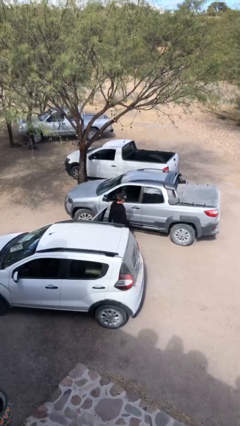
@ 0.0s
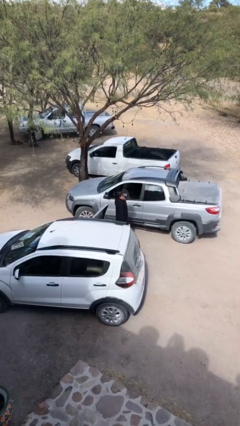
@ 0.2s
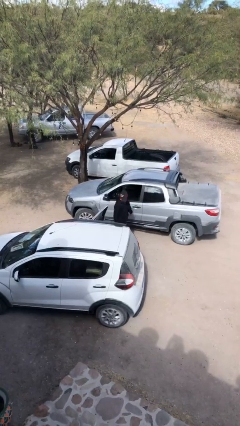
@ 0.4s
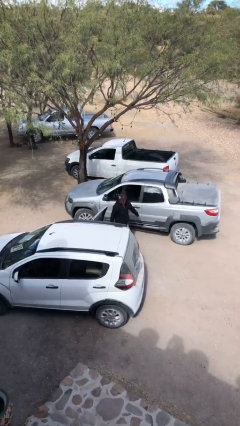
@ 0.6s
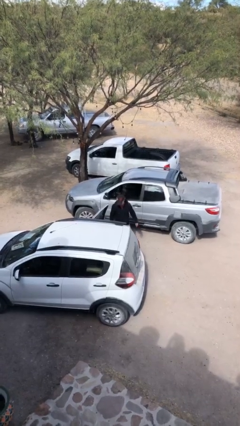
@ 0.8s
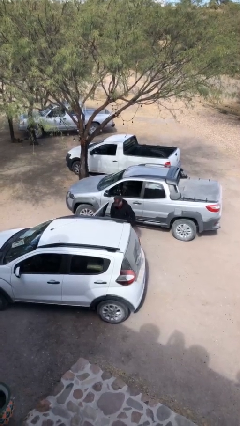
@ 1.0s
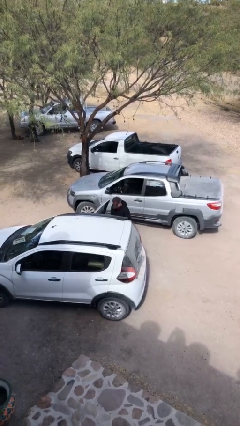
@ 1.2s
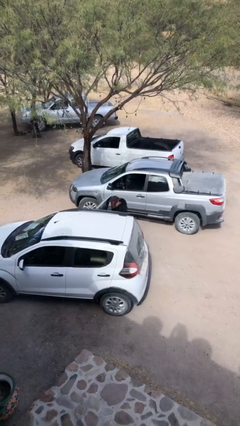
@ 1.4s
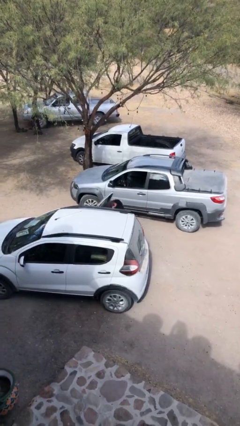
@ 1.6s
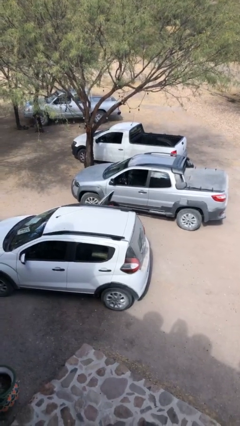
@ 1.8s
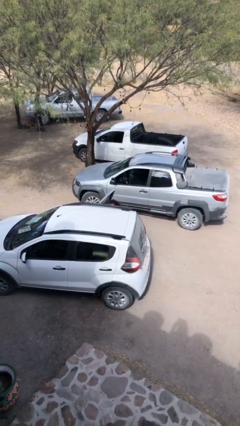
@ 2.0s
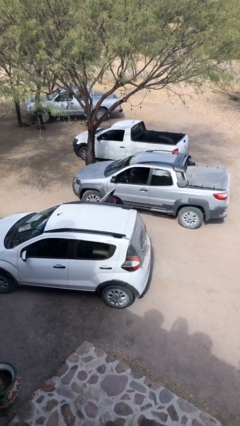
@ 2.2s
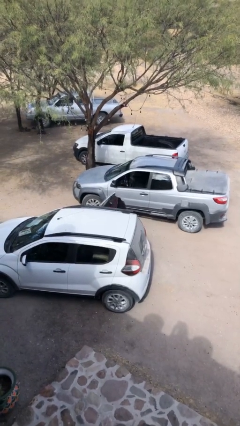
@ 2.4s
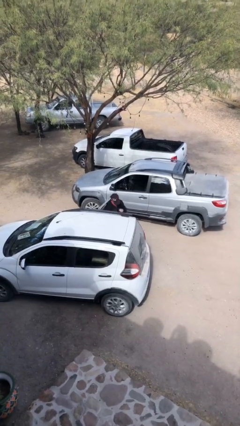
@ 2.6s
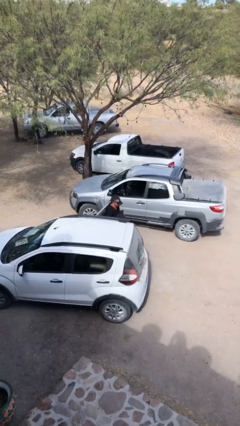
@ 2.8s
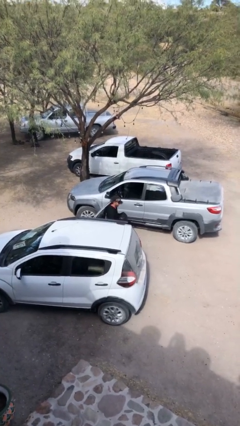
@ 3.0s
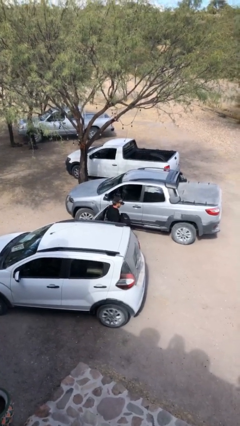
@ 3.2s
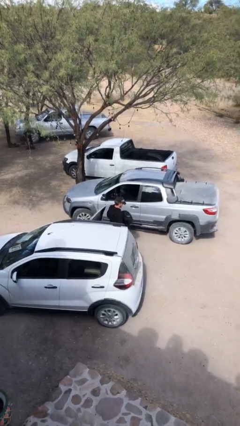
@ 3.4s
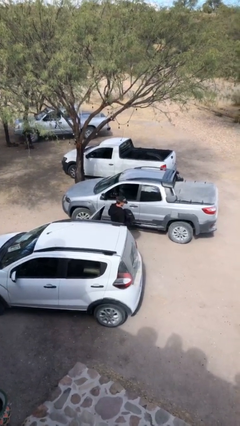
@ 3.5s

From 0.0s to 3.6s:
person unloads car

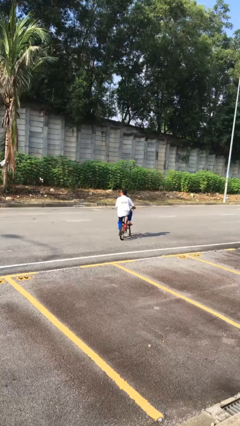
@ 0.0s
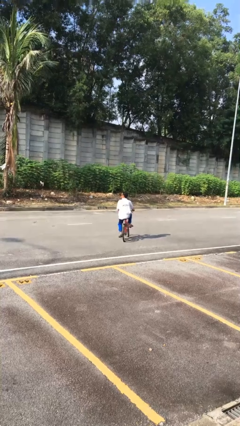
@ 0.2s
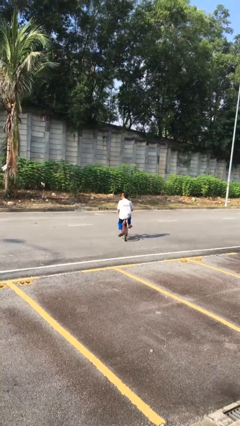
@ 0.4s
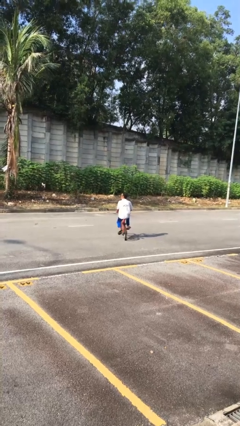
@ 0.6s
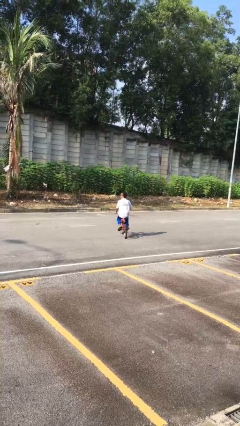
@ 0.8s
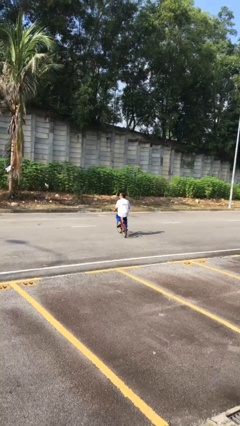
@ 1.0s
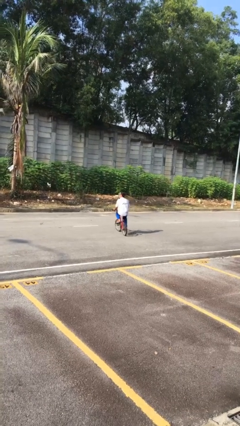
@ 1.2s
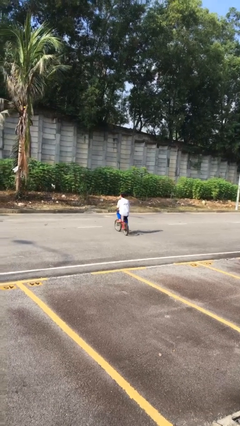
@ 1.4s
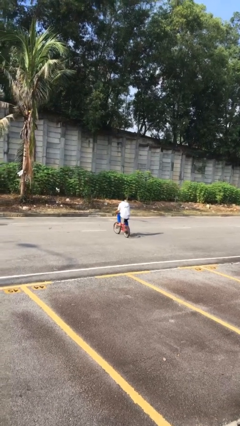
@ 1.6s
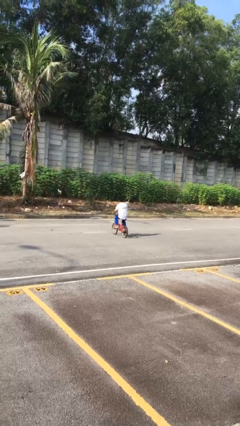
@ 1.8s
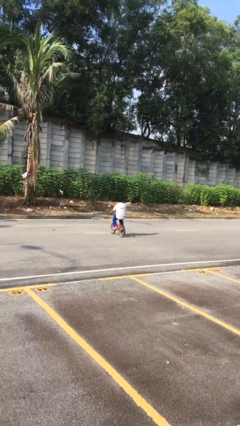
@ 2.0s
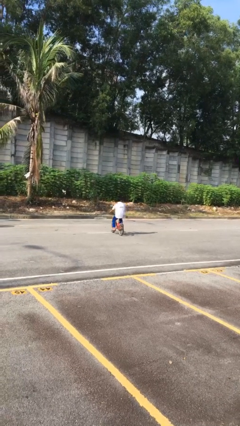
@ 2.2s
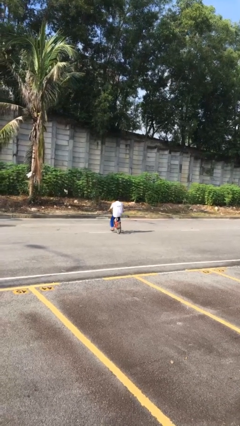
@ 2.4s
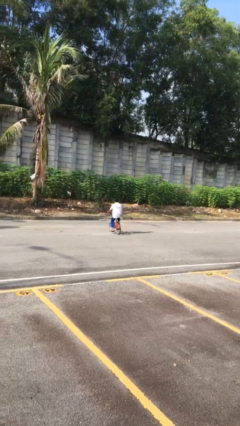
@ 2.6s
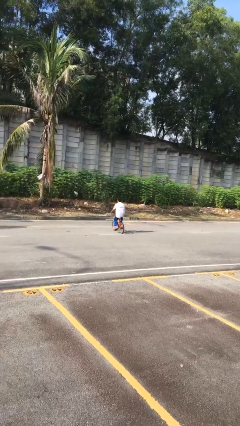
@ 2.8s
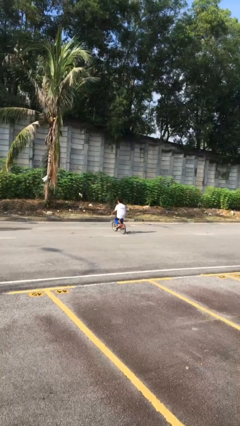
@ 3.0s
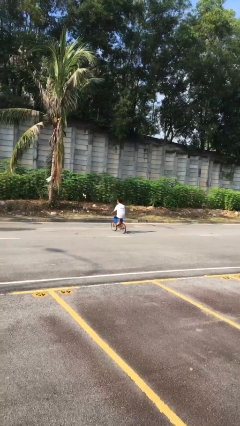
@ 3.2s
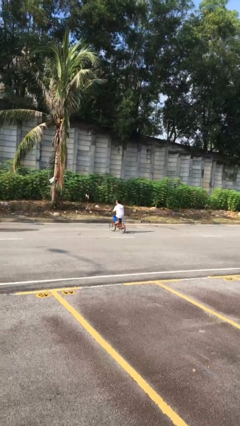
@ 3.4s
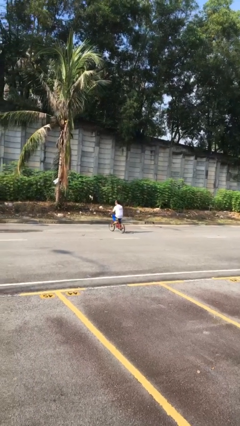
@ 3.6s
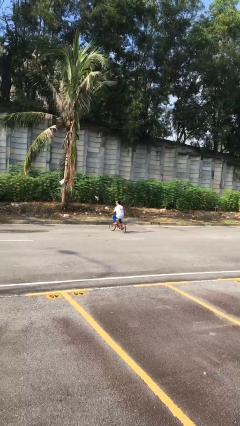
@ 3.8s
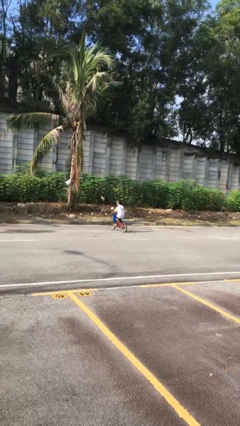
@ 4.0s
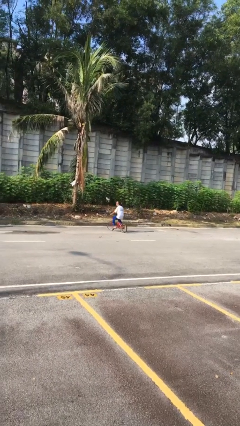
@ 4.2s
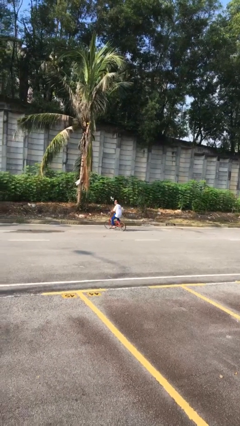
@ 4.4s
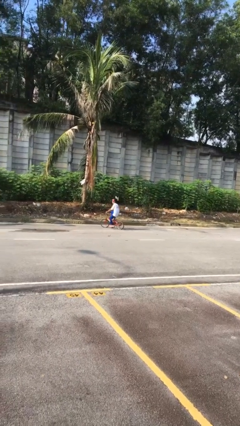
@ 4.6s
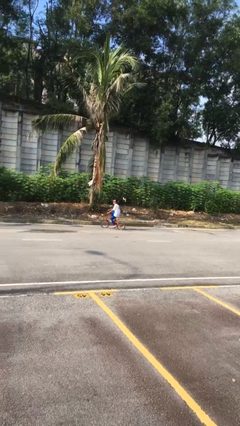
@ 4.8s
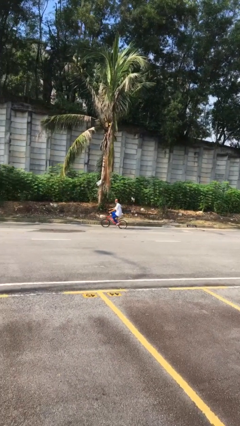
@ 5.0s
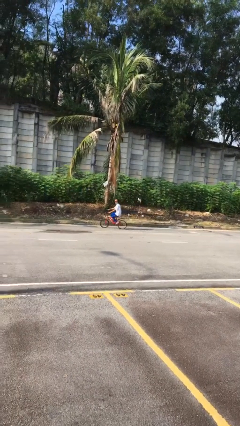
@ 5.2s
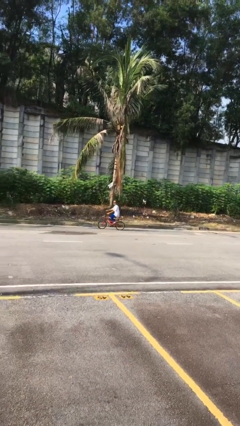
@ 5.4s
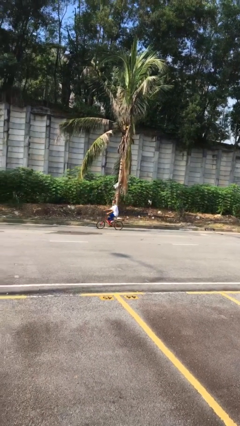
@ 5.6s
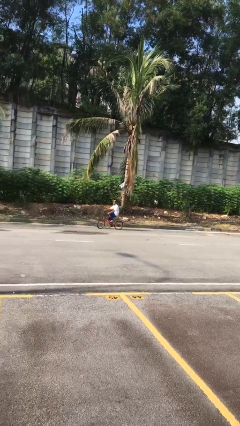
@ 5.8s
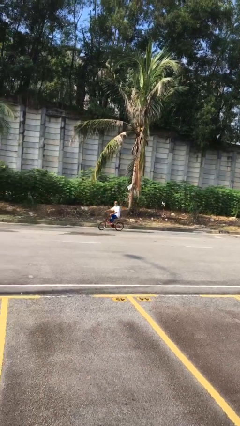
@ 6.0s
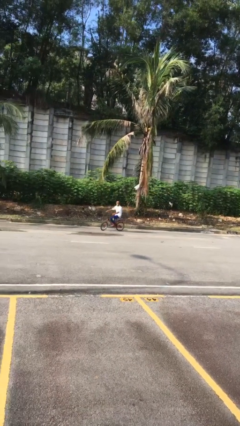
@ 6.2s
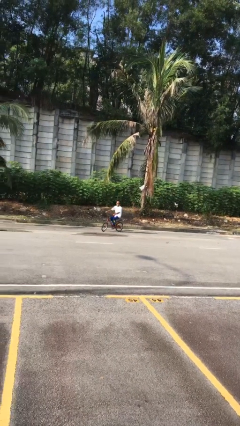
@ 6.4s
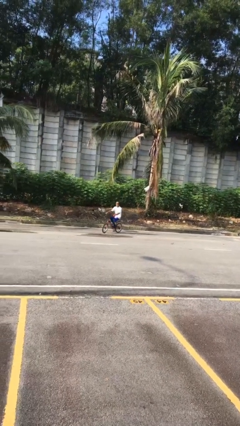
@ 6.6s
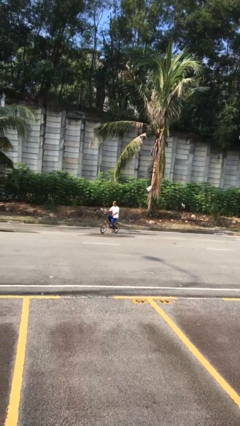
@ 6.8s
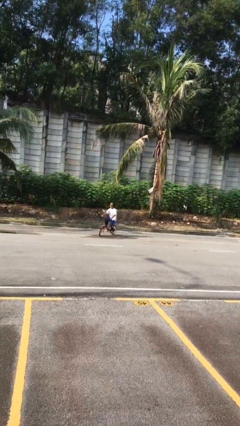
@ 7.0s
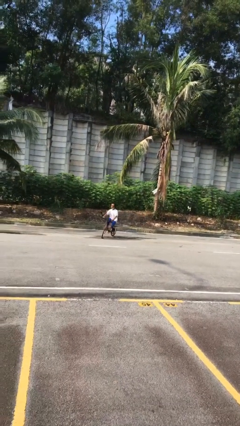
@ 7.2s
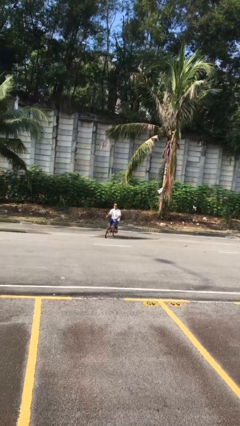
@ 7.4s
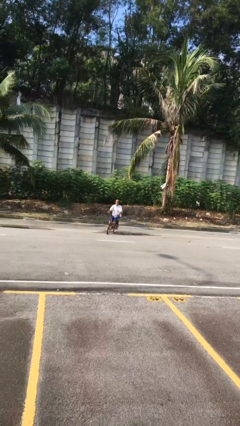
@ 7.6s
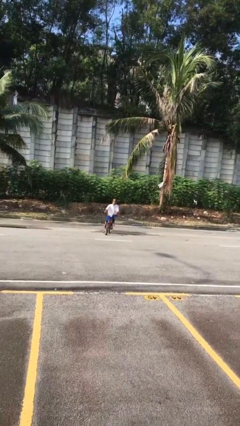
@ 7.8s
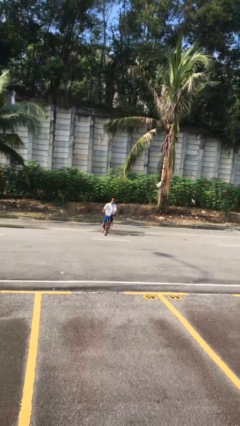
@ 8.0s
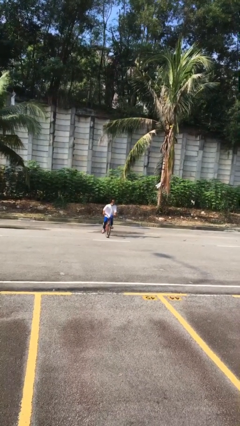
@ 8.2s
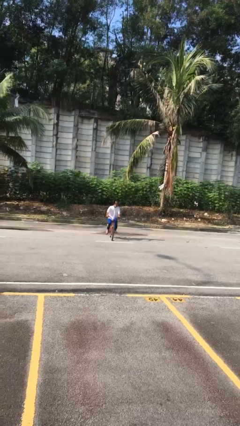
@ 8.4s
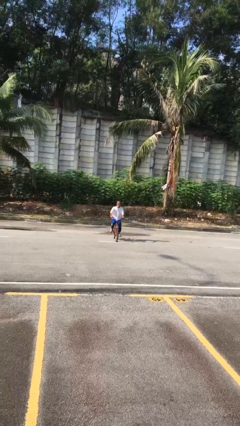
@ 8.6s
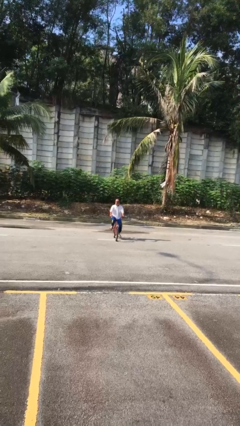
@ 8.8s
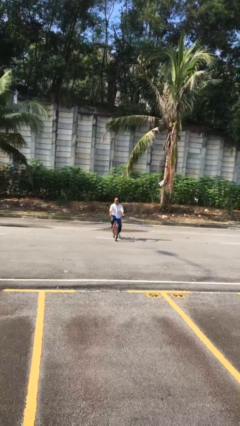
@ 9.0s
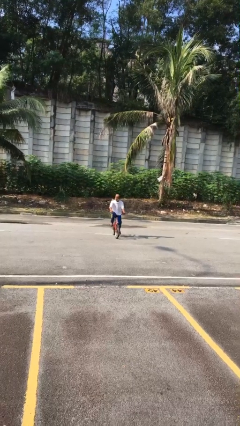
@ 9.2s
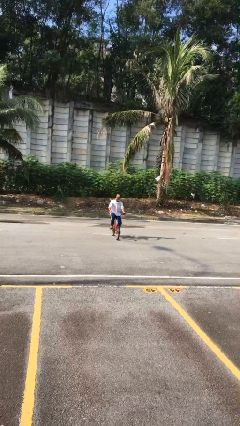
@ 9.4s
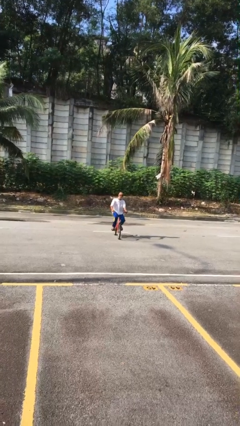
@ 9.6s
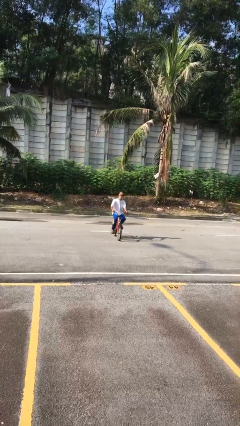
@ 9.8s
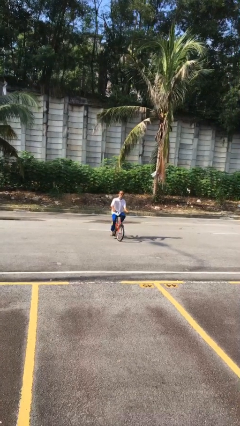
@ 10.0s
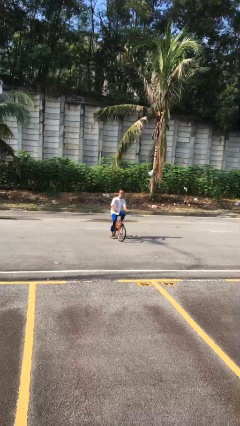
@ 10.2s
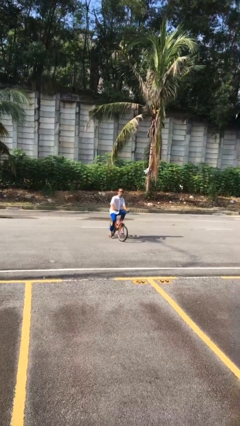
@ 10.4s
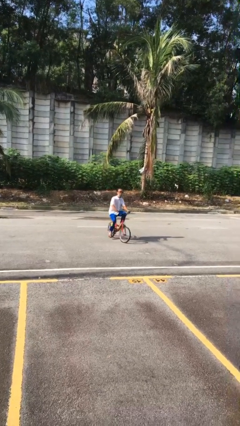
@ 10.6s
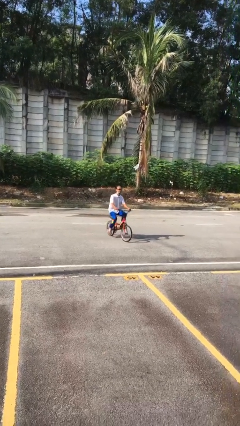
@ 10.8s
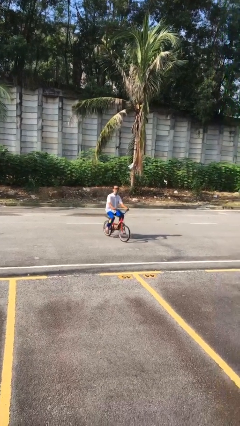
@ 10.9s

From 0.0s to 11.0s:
person rides bicycle

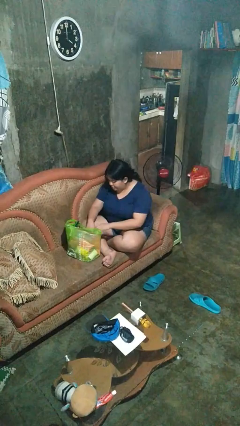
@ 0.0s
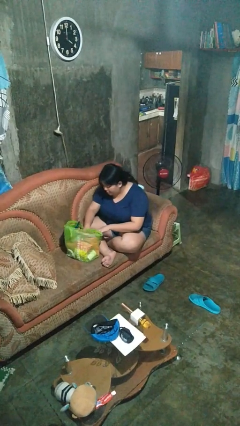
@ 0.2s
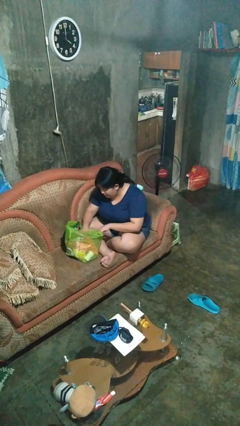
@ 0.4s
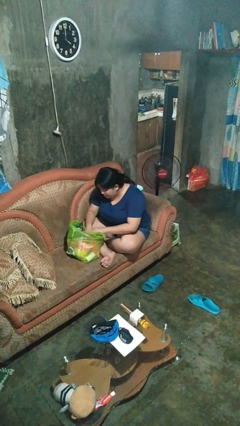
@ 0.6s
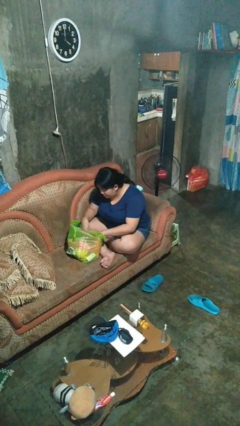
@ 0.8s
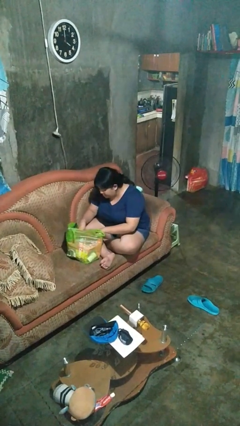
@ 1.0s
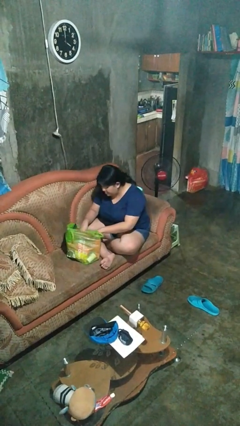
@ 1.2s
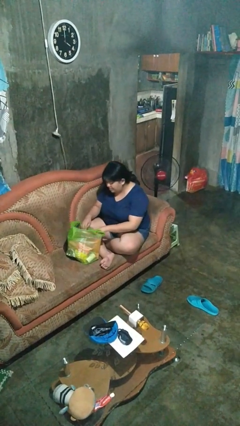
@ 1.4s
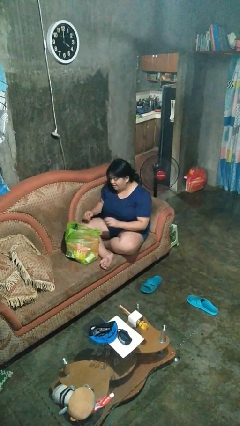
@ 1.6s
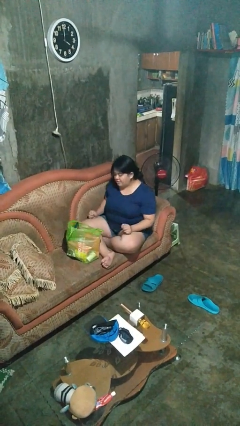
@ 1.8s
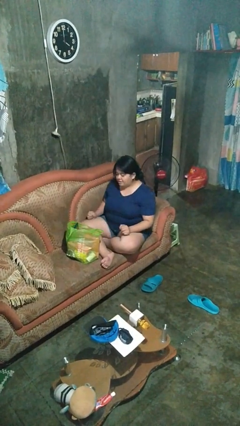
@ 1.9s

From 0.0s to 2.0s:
person searches in bag

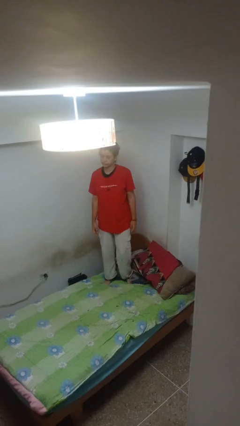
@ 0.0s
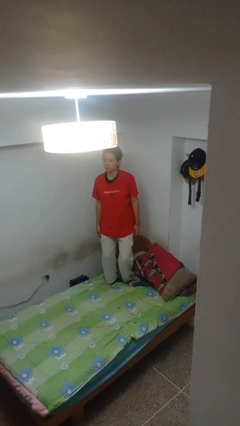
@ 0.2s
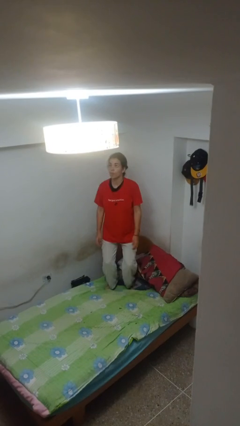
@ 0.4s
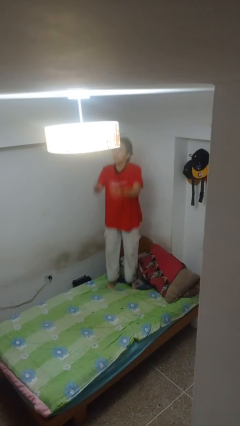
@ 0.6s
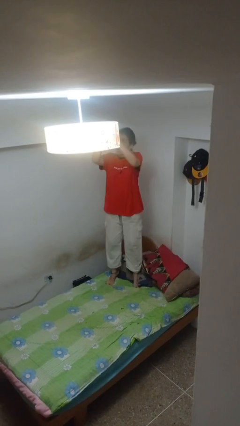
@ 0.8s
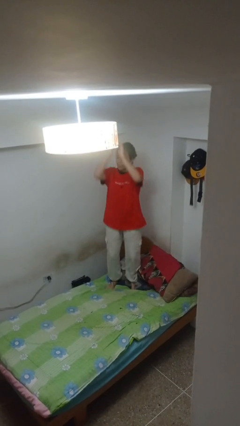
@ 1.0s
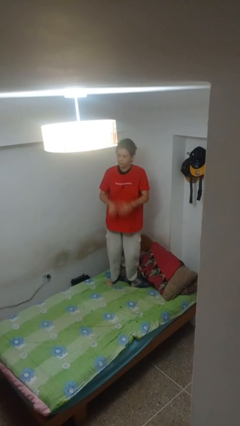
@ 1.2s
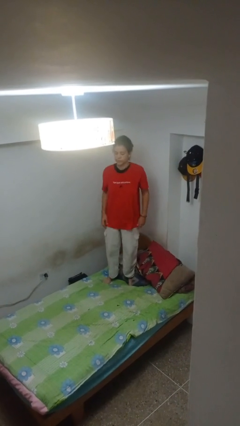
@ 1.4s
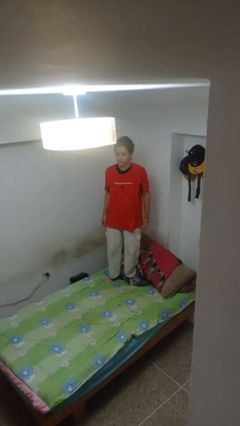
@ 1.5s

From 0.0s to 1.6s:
person jumps on bed
